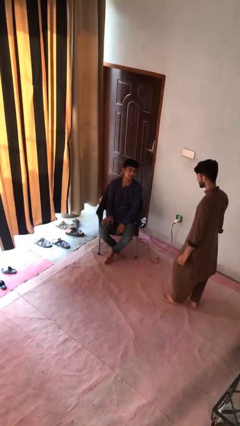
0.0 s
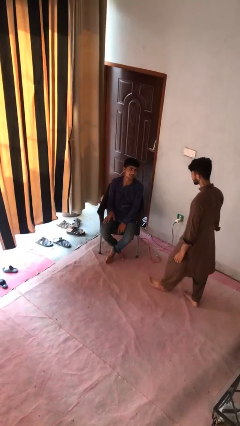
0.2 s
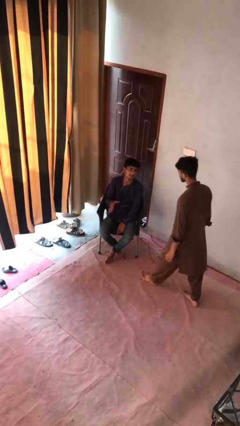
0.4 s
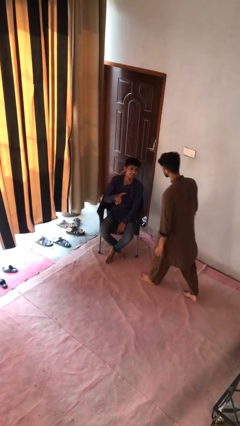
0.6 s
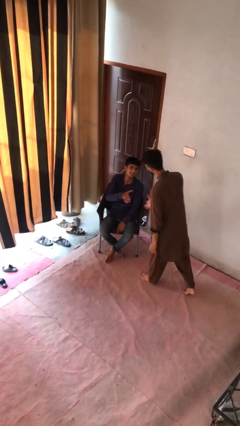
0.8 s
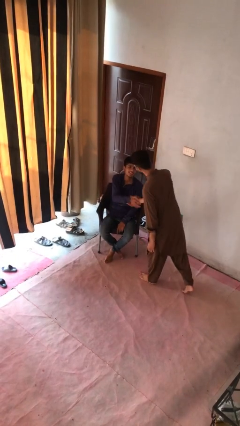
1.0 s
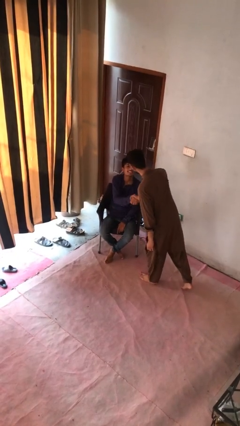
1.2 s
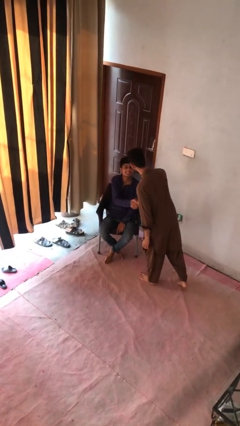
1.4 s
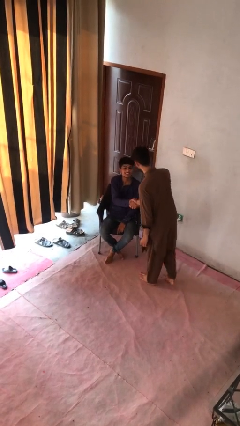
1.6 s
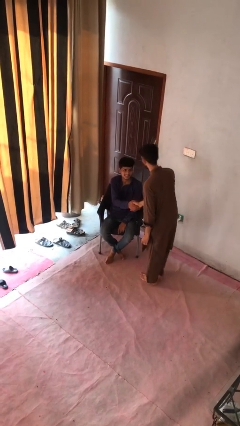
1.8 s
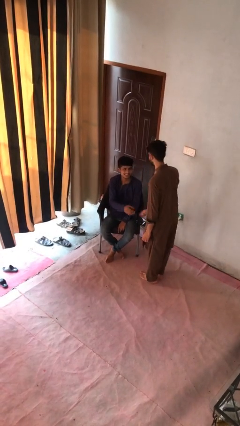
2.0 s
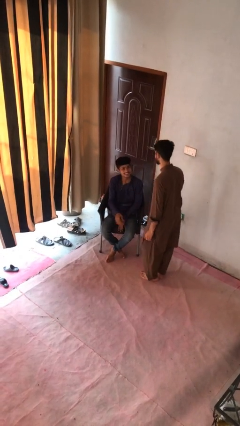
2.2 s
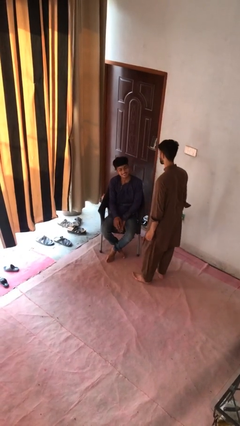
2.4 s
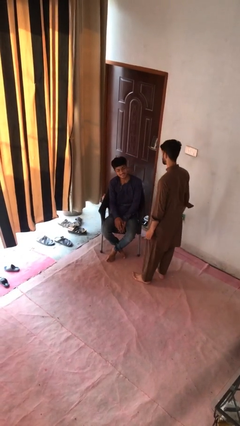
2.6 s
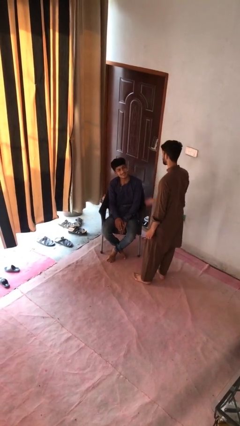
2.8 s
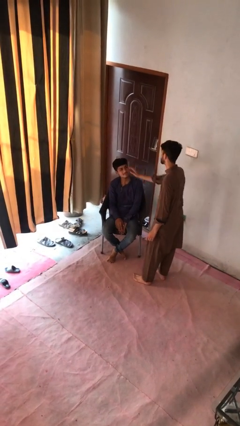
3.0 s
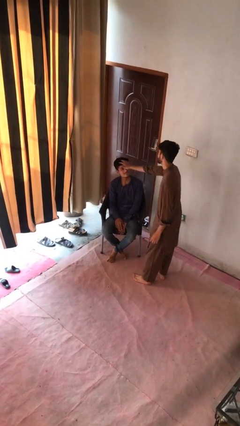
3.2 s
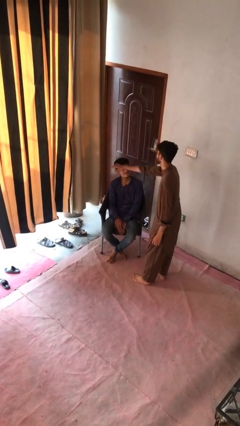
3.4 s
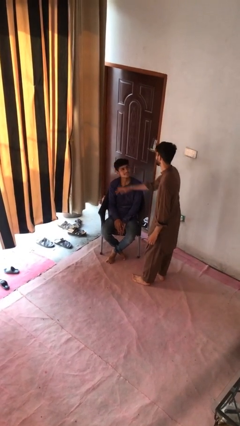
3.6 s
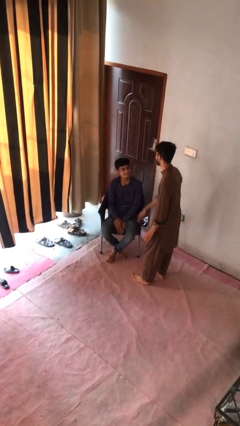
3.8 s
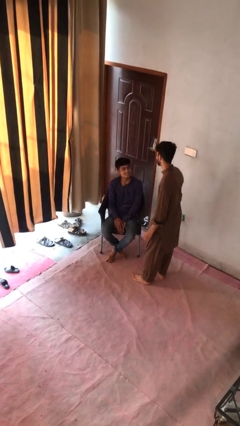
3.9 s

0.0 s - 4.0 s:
person shakes hand

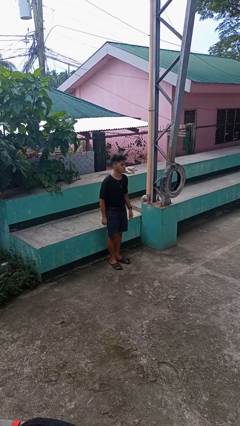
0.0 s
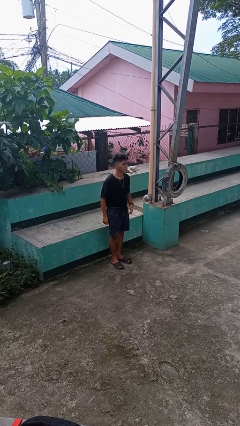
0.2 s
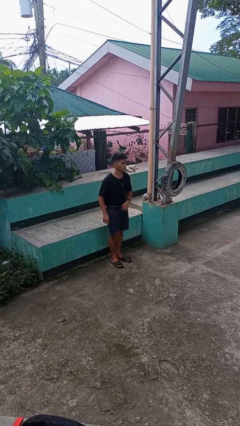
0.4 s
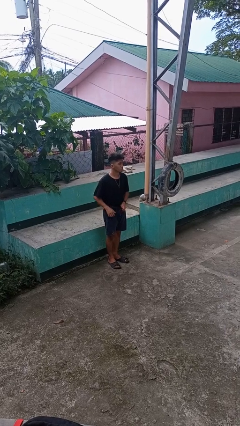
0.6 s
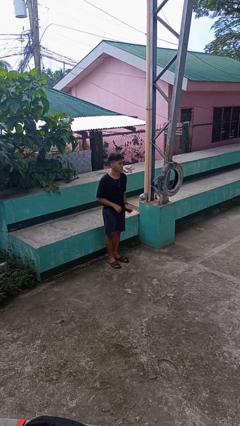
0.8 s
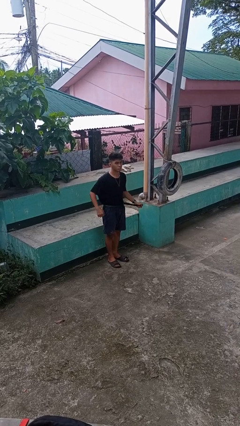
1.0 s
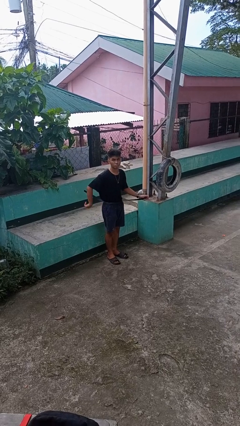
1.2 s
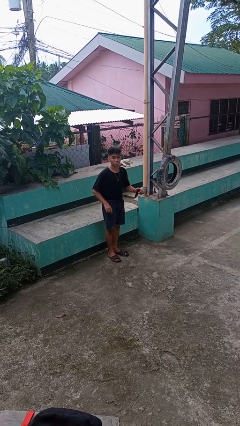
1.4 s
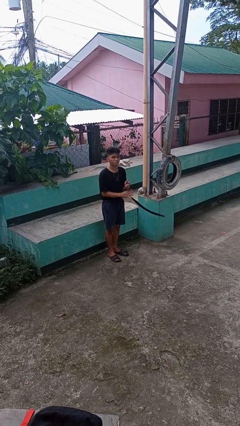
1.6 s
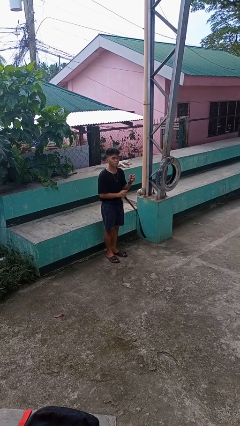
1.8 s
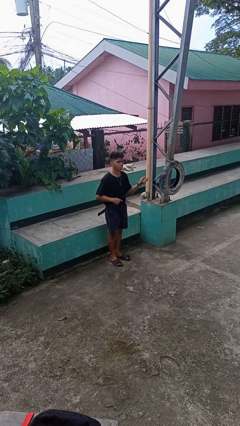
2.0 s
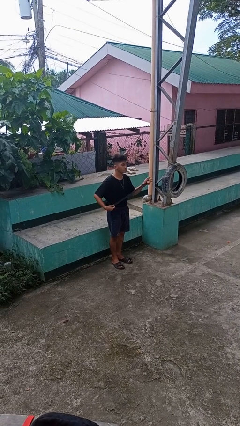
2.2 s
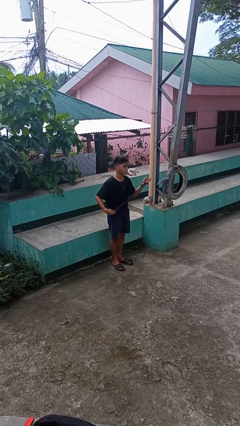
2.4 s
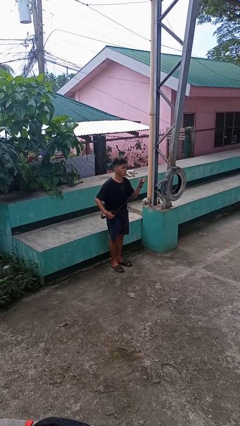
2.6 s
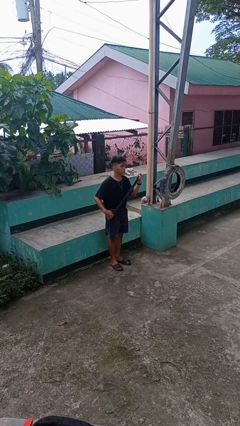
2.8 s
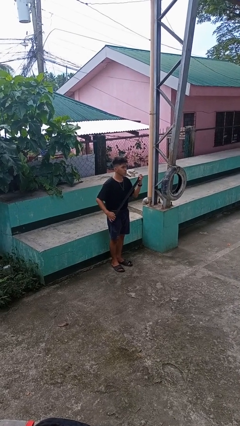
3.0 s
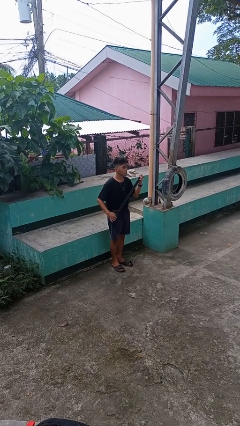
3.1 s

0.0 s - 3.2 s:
person takes off belt

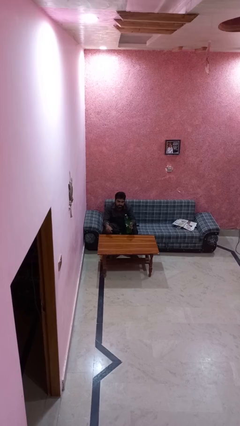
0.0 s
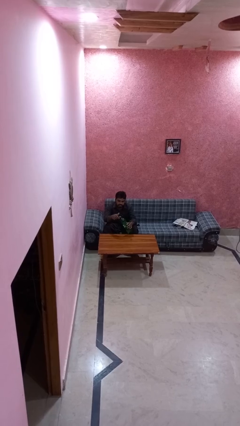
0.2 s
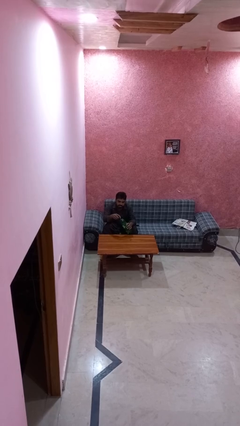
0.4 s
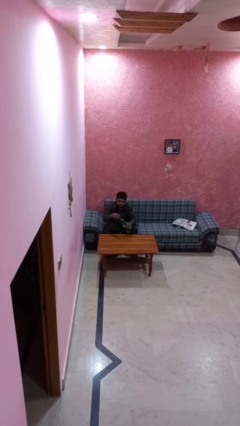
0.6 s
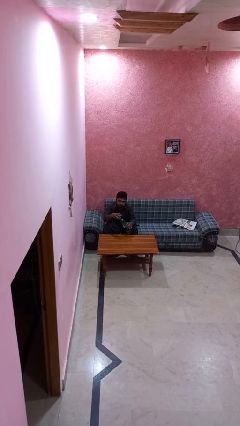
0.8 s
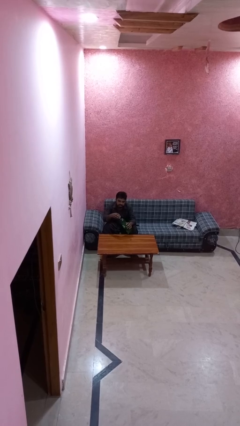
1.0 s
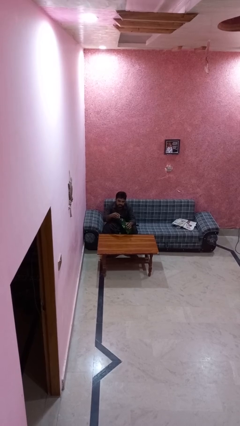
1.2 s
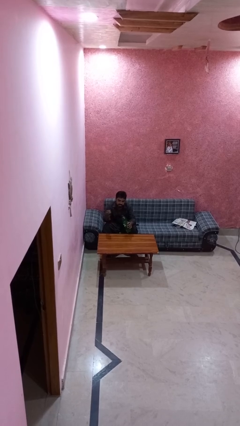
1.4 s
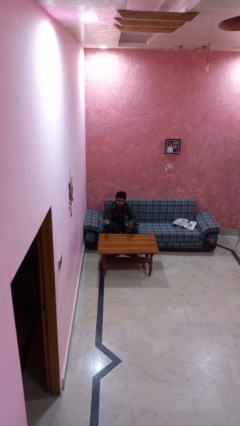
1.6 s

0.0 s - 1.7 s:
person unscrews lid from bottle

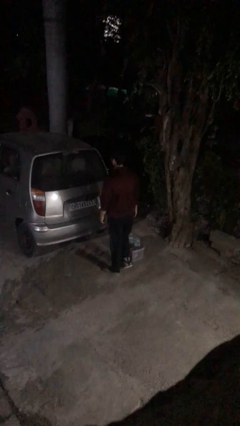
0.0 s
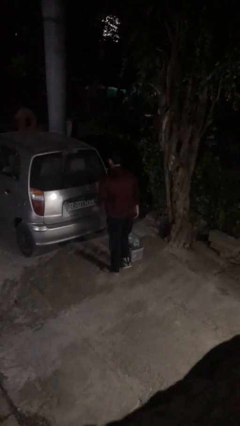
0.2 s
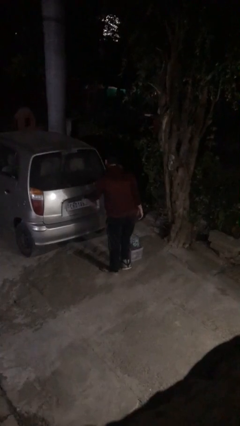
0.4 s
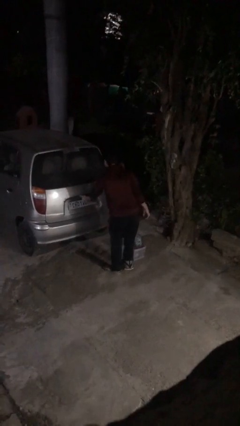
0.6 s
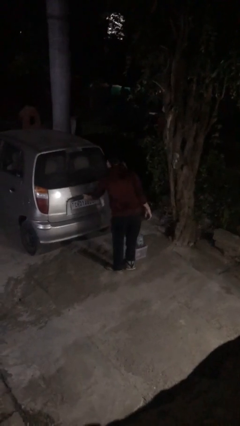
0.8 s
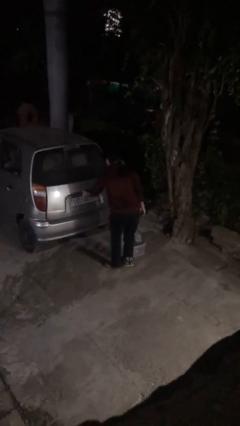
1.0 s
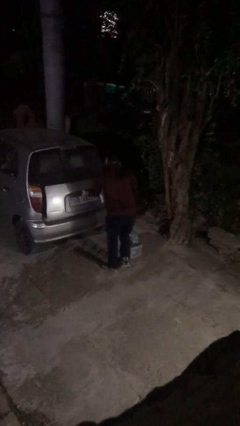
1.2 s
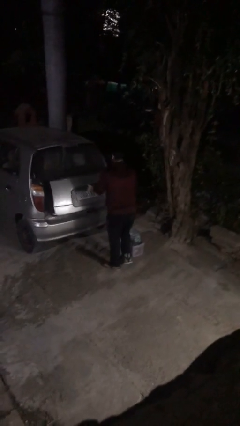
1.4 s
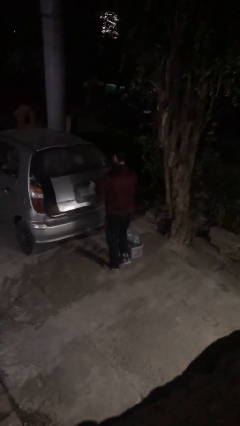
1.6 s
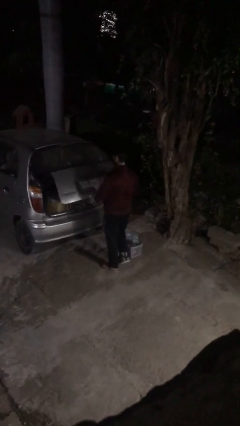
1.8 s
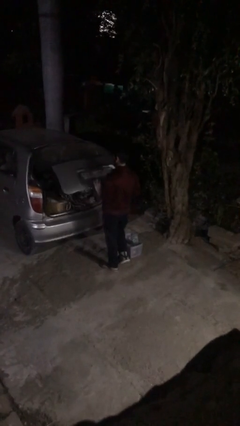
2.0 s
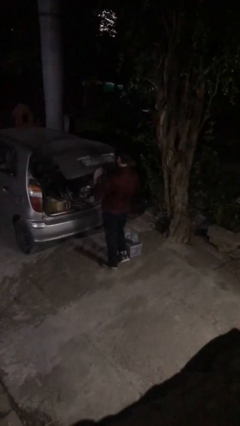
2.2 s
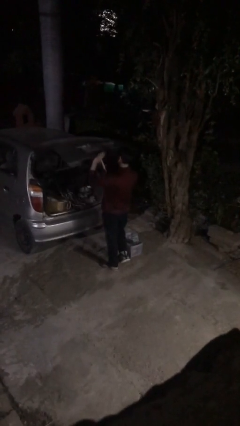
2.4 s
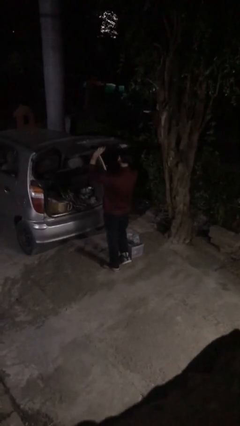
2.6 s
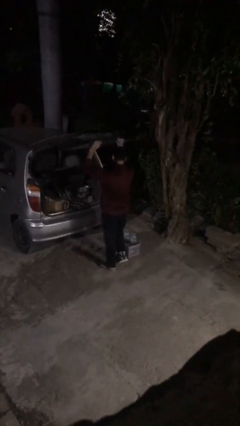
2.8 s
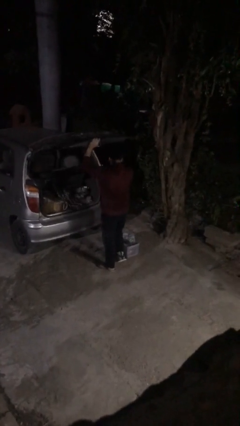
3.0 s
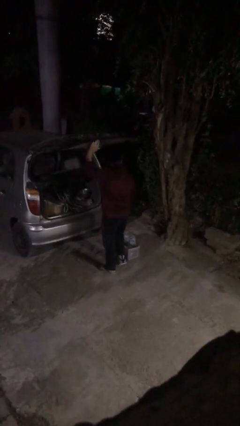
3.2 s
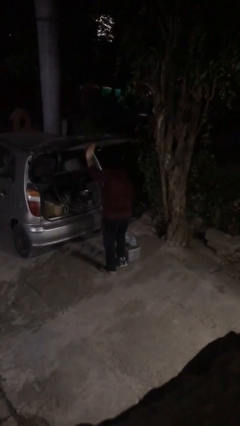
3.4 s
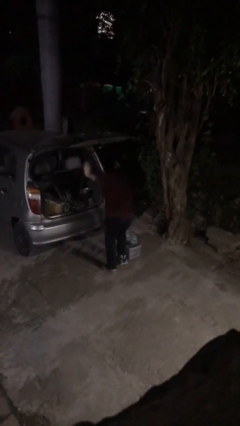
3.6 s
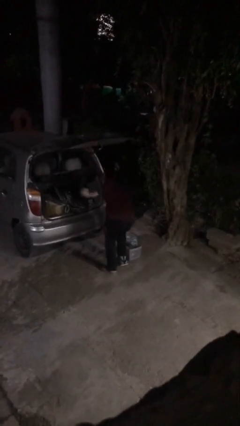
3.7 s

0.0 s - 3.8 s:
person opens car trunk

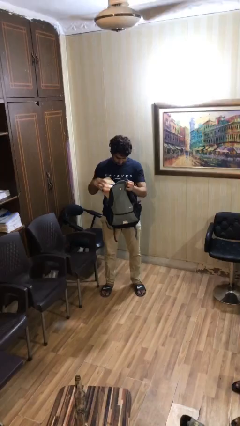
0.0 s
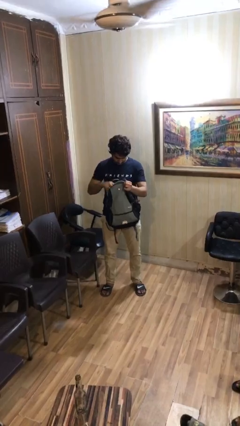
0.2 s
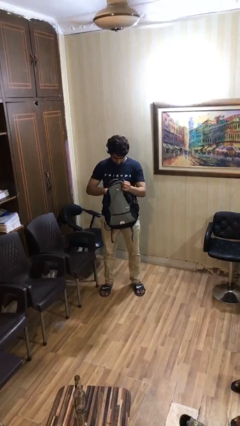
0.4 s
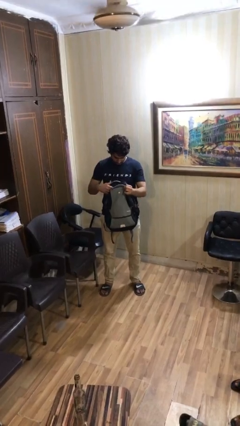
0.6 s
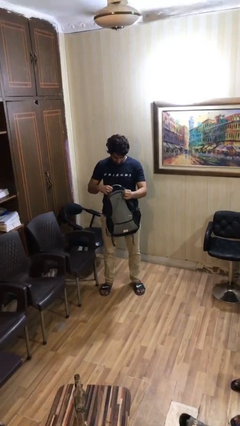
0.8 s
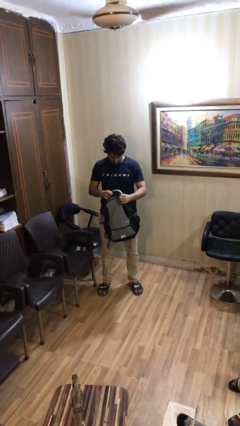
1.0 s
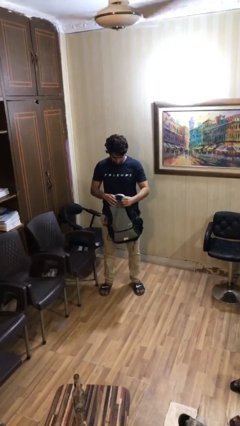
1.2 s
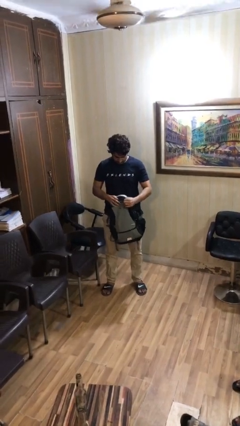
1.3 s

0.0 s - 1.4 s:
person puts object into backpack

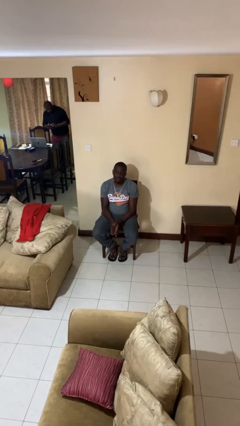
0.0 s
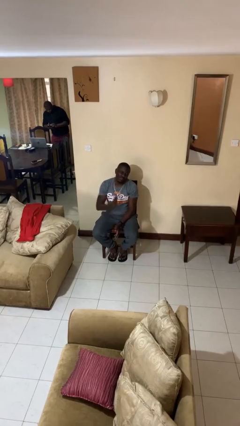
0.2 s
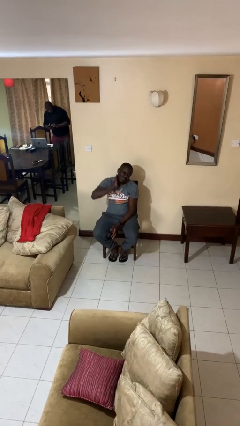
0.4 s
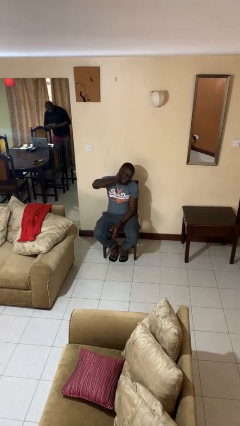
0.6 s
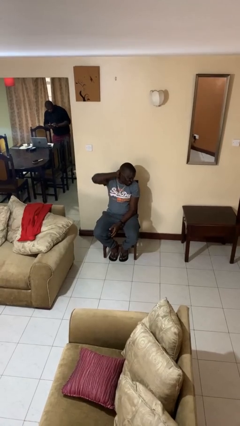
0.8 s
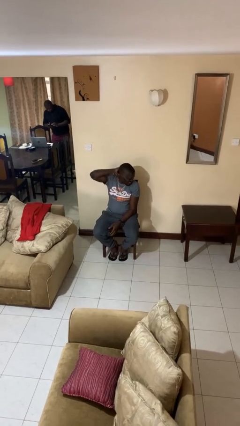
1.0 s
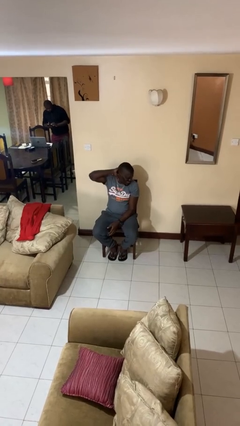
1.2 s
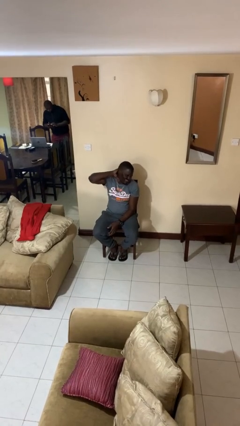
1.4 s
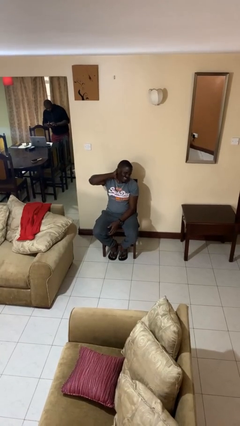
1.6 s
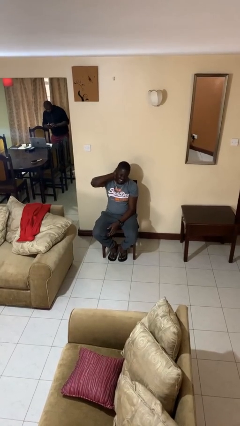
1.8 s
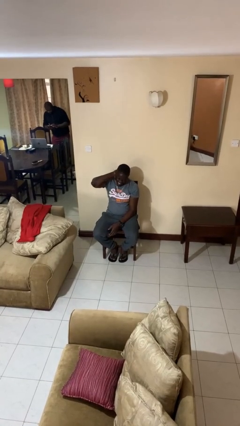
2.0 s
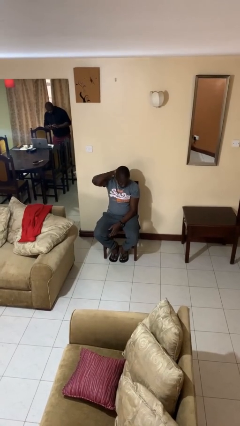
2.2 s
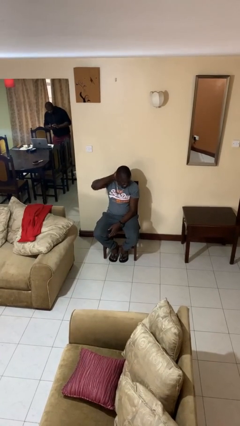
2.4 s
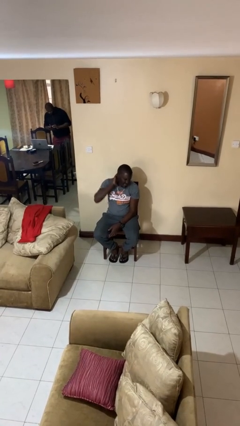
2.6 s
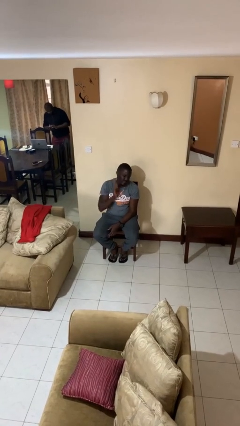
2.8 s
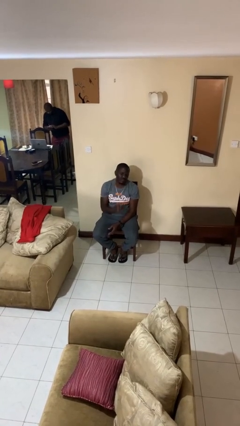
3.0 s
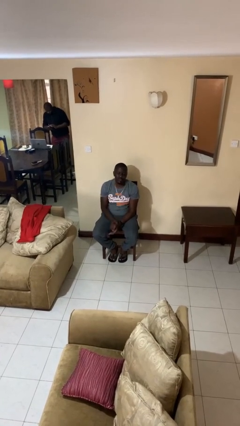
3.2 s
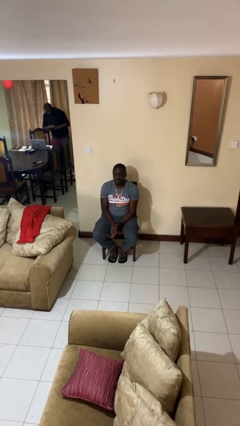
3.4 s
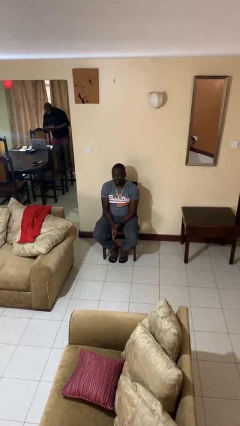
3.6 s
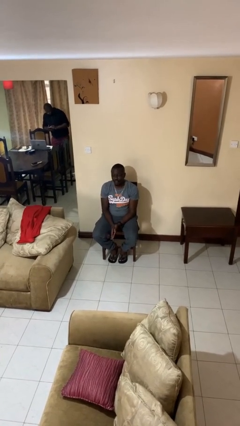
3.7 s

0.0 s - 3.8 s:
person rubs neck
